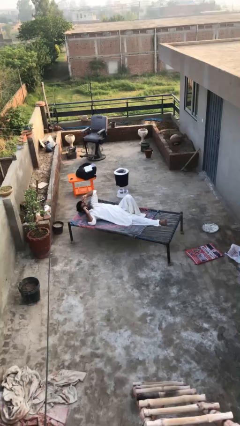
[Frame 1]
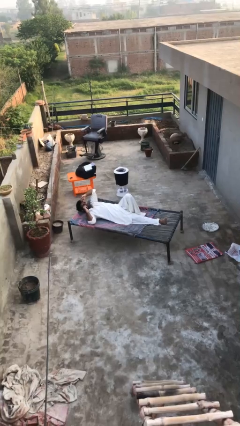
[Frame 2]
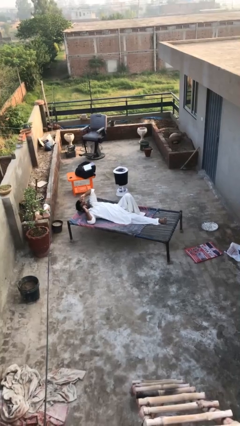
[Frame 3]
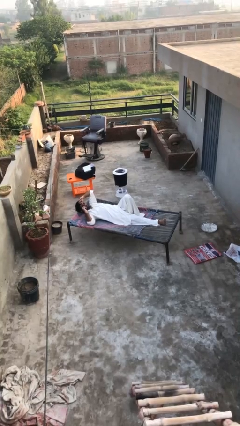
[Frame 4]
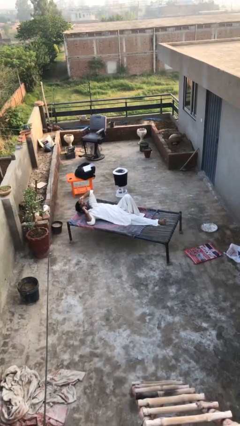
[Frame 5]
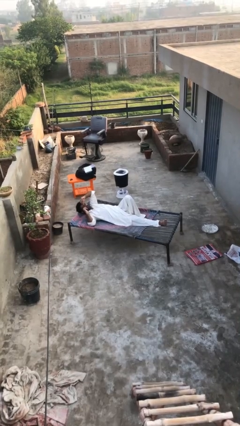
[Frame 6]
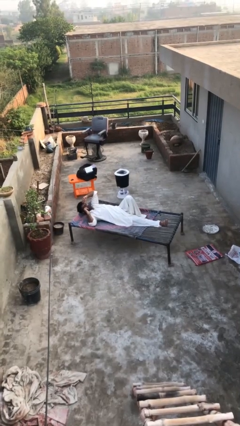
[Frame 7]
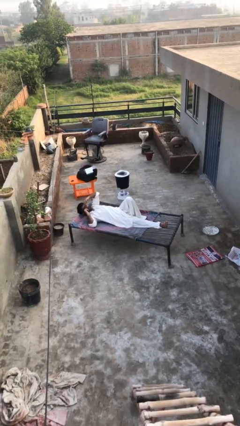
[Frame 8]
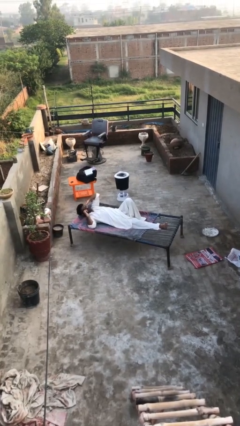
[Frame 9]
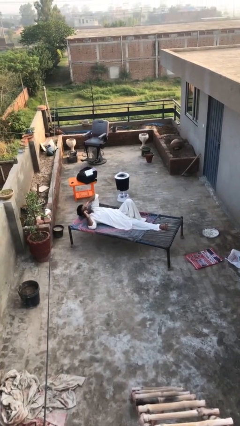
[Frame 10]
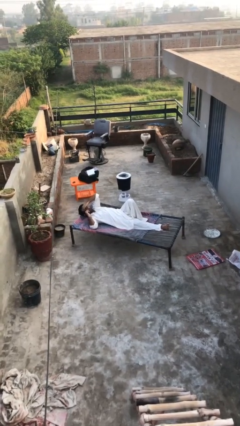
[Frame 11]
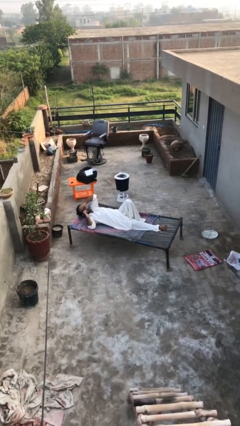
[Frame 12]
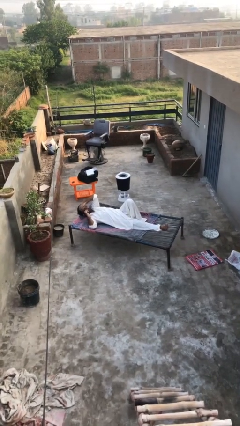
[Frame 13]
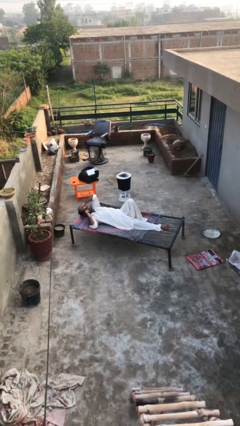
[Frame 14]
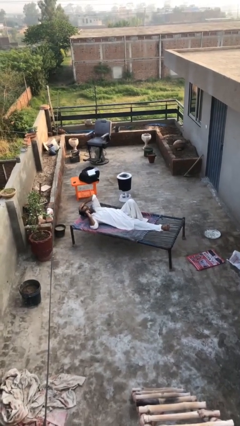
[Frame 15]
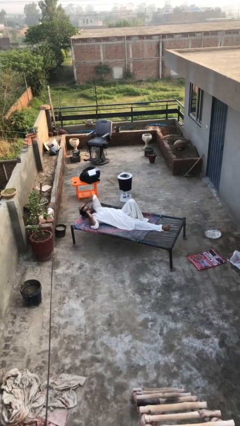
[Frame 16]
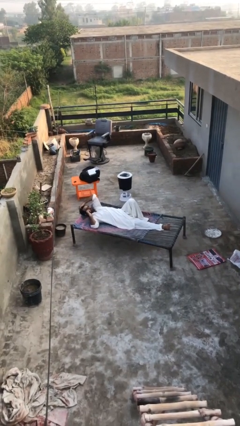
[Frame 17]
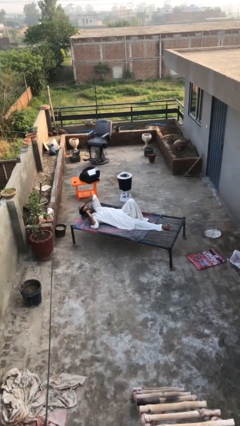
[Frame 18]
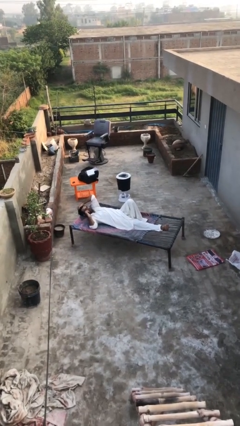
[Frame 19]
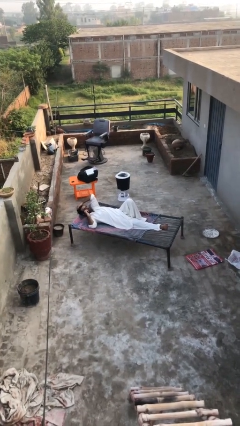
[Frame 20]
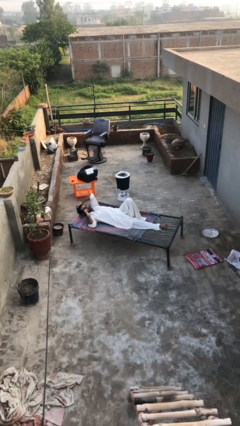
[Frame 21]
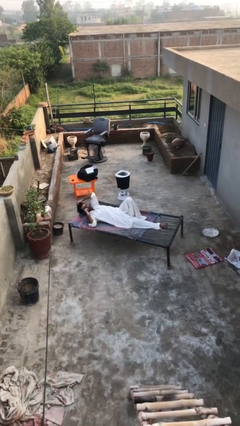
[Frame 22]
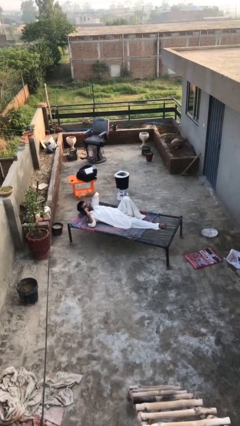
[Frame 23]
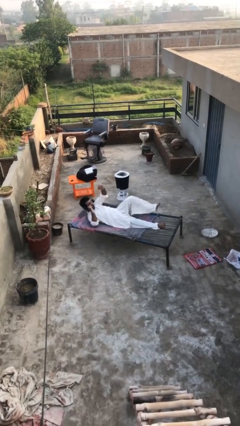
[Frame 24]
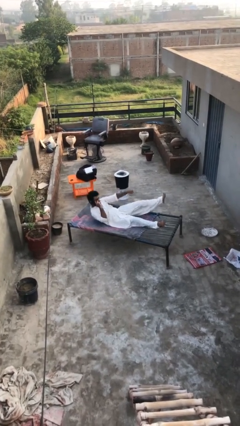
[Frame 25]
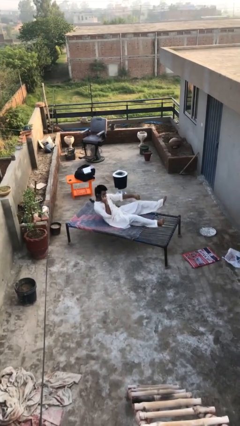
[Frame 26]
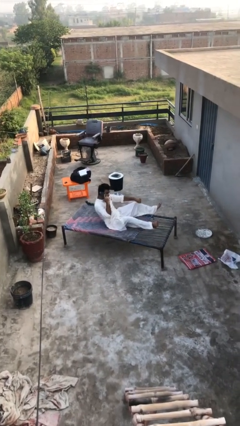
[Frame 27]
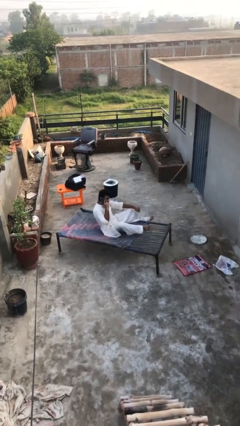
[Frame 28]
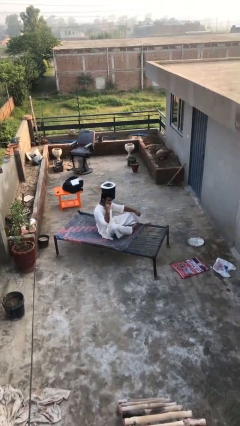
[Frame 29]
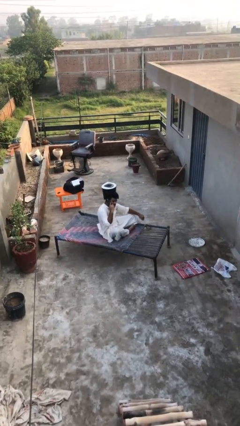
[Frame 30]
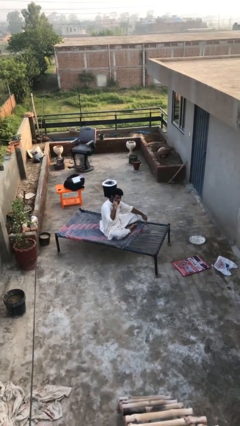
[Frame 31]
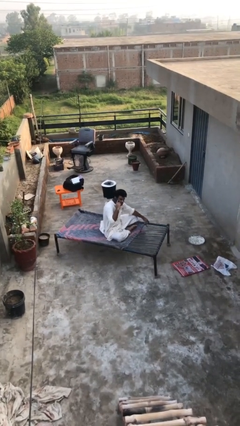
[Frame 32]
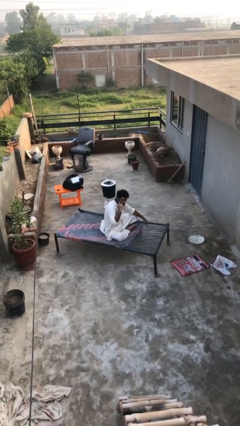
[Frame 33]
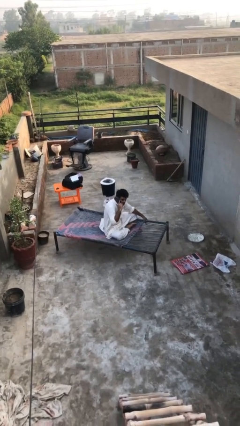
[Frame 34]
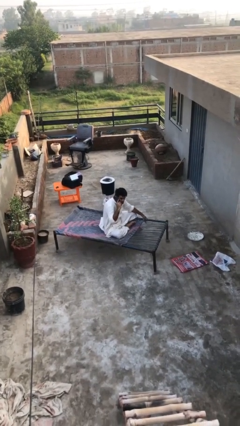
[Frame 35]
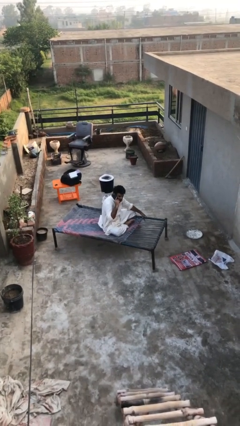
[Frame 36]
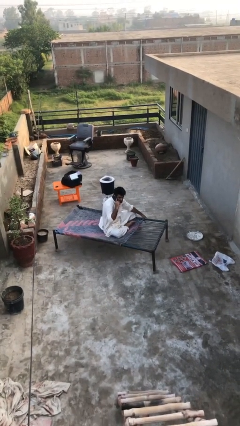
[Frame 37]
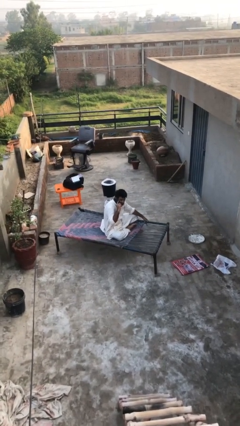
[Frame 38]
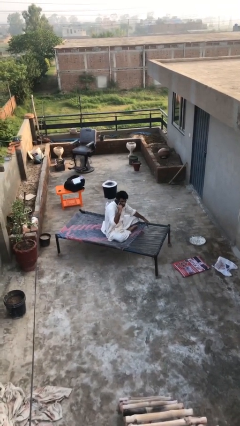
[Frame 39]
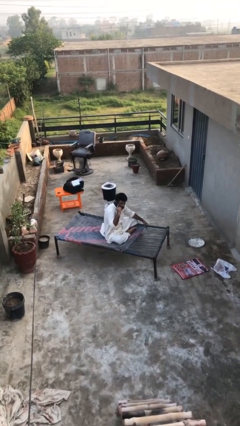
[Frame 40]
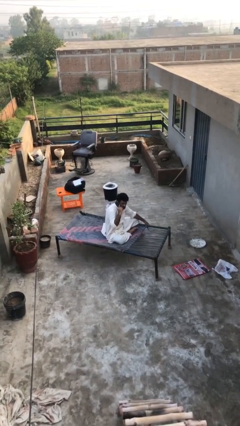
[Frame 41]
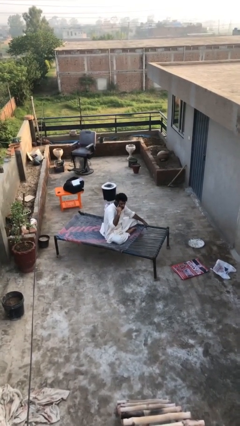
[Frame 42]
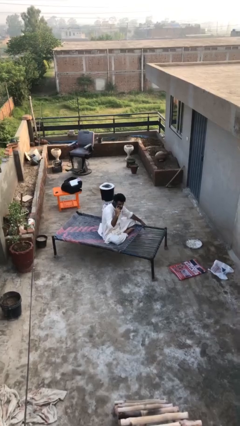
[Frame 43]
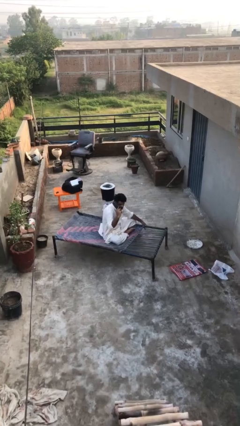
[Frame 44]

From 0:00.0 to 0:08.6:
person talks on phone

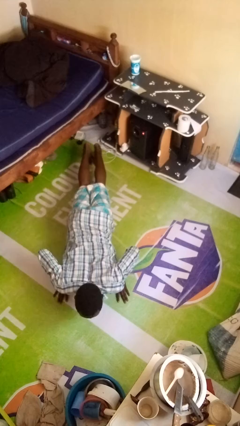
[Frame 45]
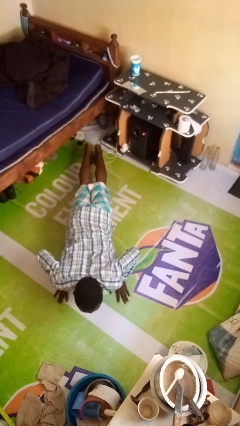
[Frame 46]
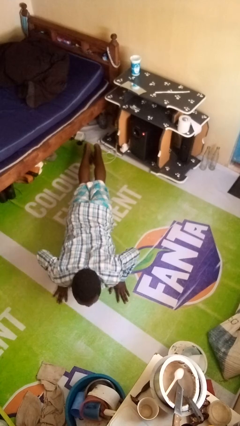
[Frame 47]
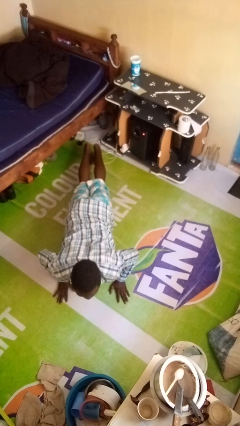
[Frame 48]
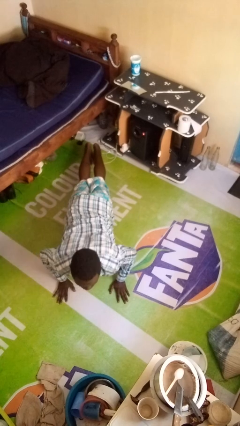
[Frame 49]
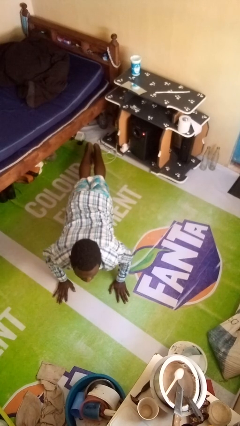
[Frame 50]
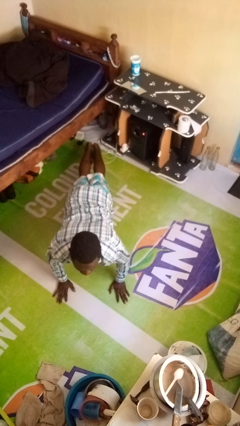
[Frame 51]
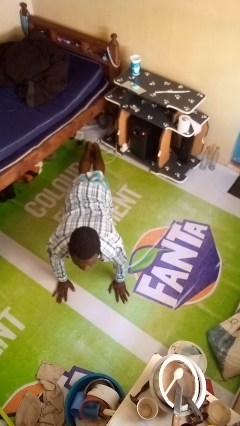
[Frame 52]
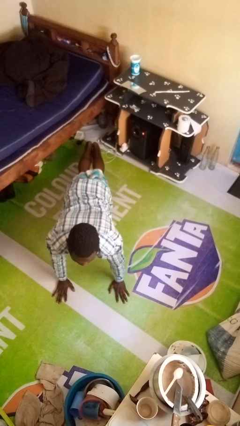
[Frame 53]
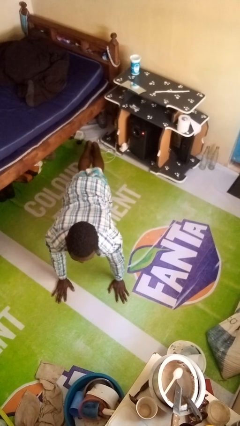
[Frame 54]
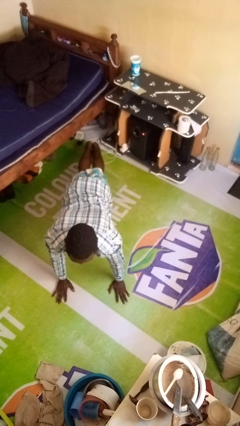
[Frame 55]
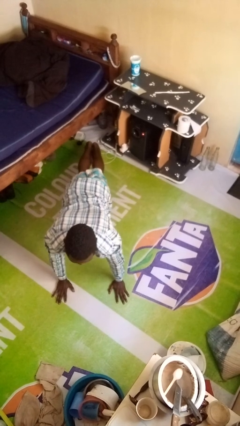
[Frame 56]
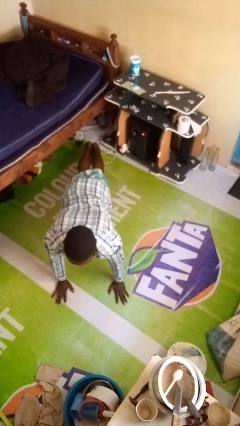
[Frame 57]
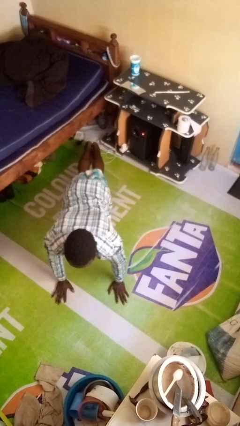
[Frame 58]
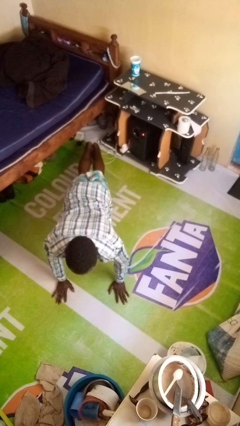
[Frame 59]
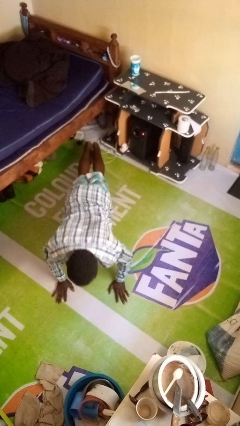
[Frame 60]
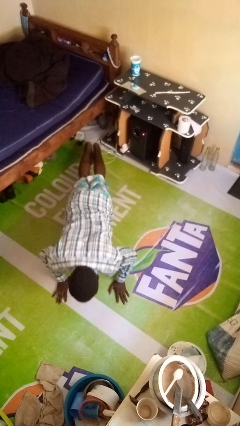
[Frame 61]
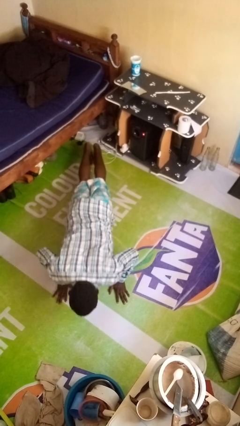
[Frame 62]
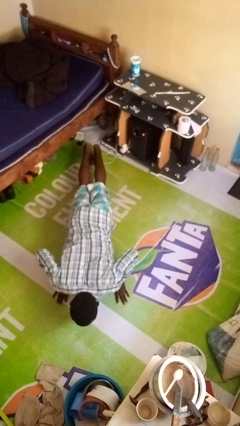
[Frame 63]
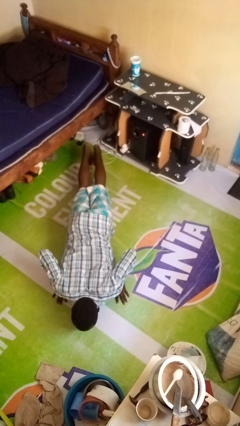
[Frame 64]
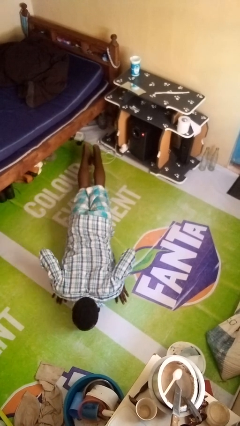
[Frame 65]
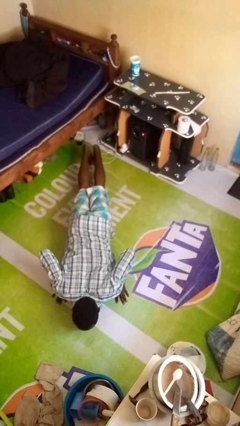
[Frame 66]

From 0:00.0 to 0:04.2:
person exercises with pushup

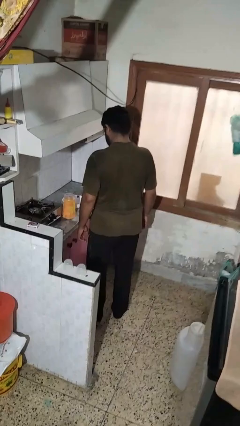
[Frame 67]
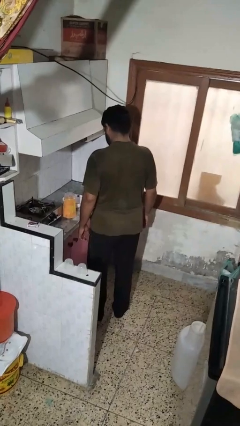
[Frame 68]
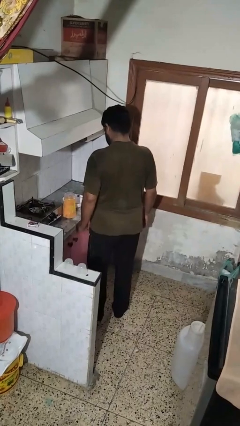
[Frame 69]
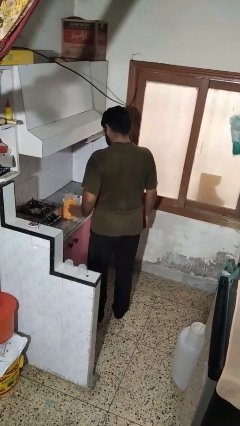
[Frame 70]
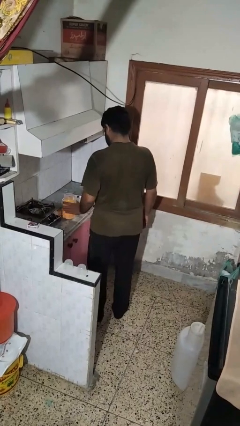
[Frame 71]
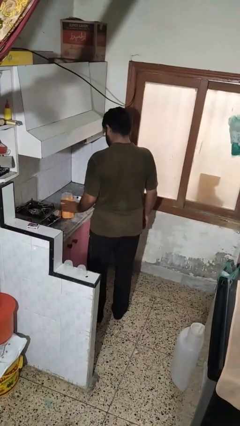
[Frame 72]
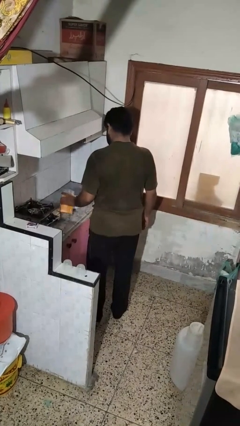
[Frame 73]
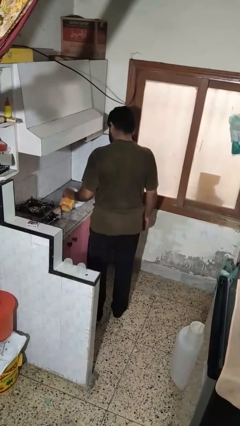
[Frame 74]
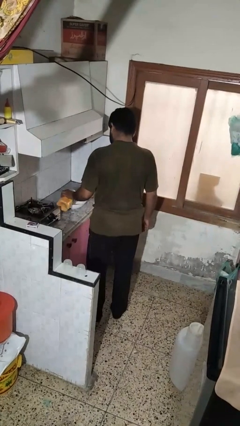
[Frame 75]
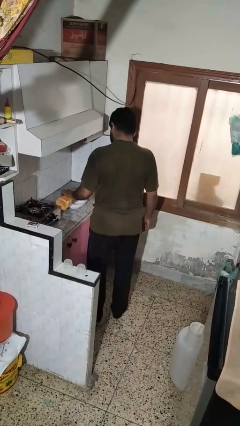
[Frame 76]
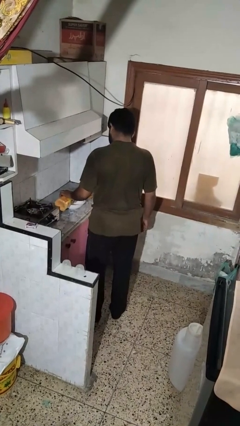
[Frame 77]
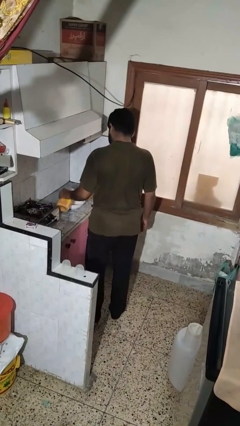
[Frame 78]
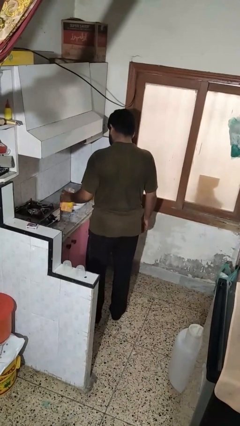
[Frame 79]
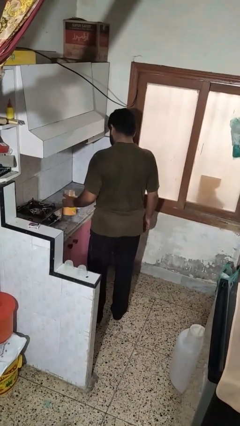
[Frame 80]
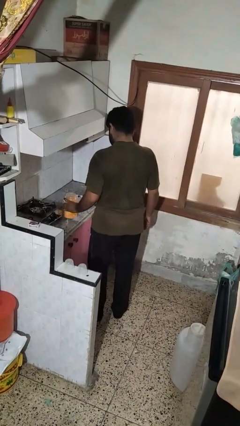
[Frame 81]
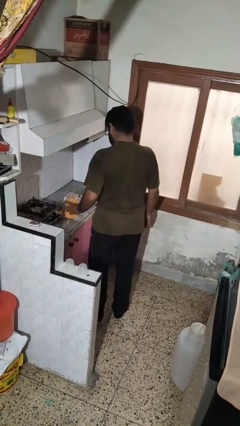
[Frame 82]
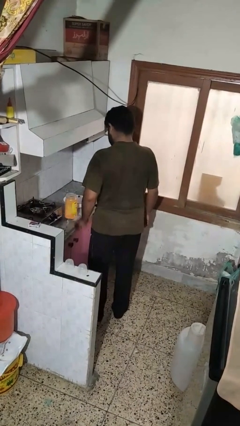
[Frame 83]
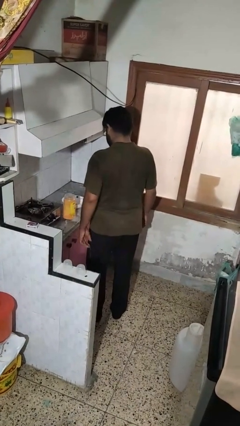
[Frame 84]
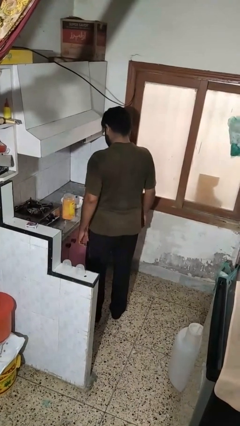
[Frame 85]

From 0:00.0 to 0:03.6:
person pours into bowl

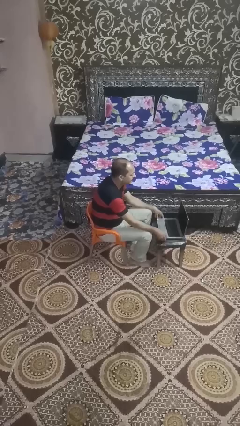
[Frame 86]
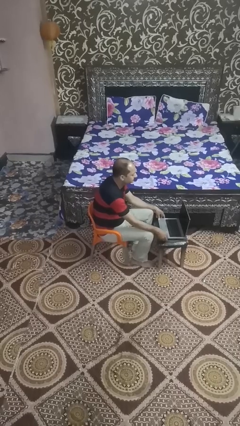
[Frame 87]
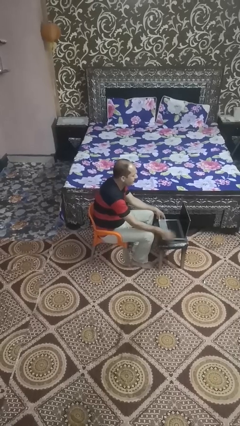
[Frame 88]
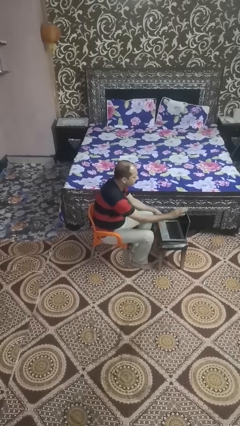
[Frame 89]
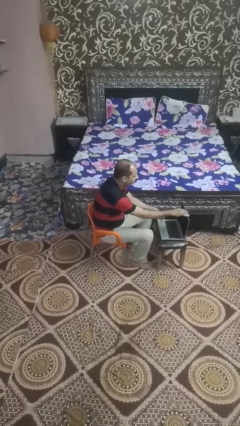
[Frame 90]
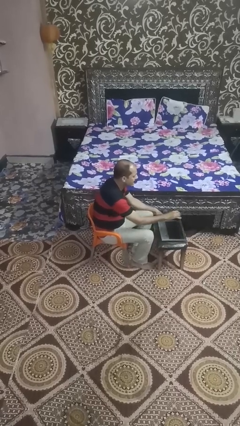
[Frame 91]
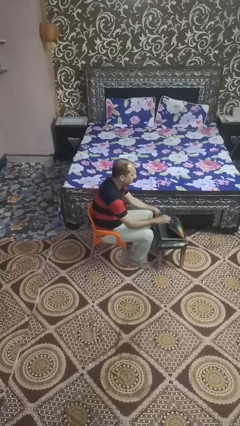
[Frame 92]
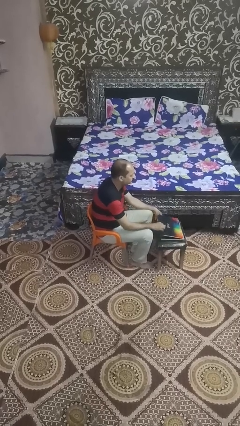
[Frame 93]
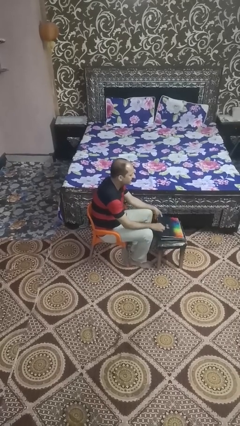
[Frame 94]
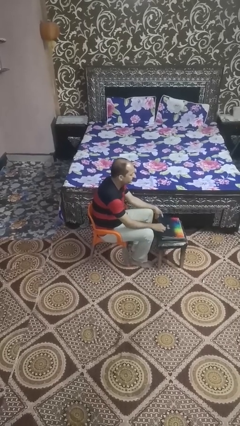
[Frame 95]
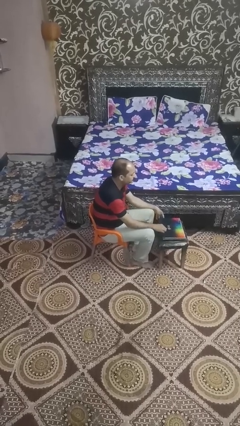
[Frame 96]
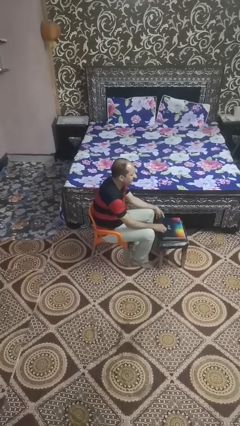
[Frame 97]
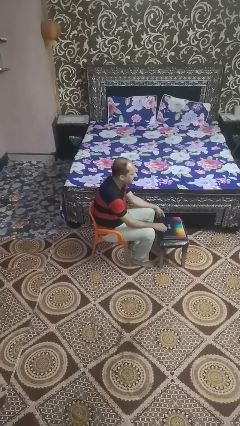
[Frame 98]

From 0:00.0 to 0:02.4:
person closes laptop
